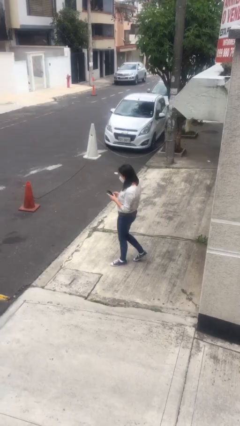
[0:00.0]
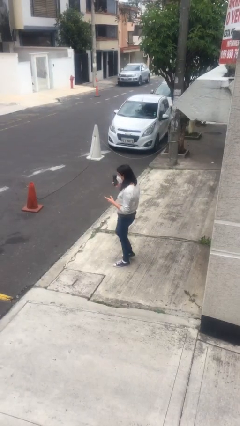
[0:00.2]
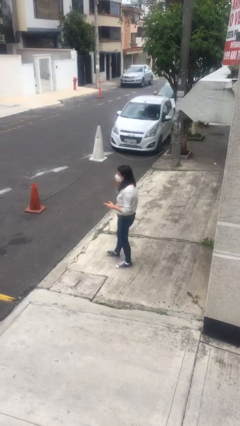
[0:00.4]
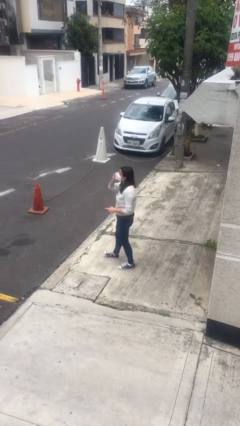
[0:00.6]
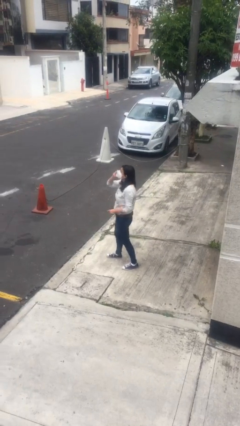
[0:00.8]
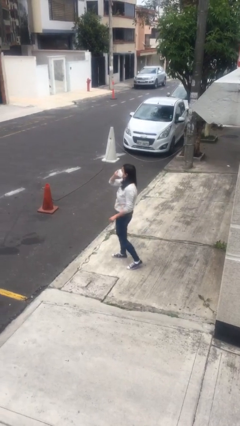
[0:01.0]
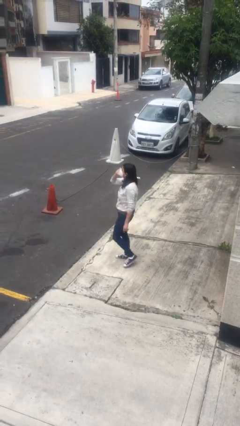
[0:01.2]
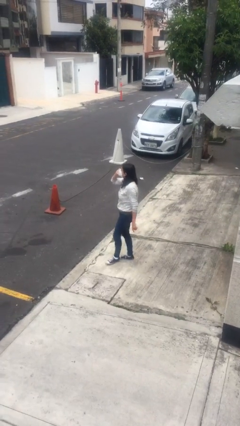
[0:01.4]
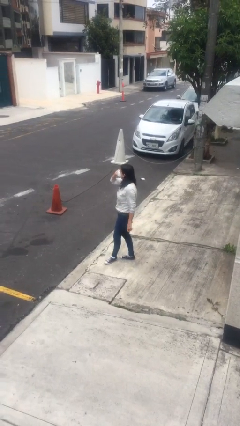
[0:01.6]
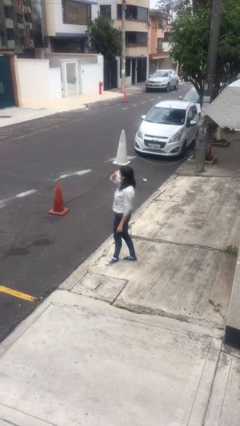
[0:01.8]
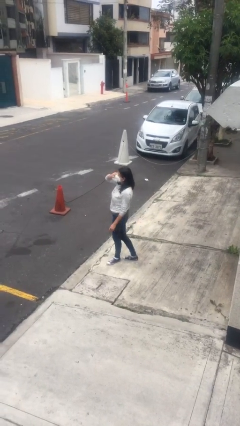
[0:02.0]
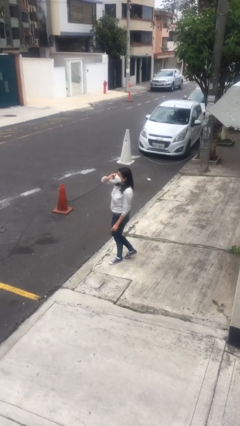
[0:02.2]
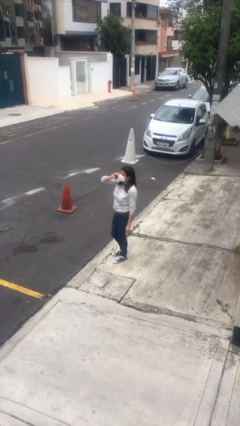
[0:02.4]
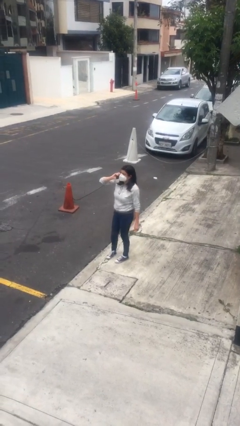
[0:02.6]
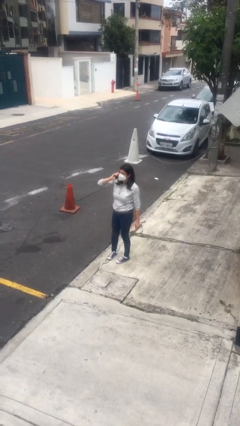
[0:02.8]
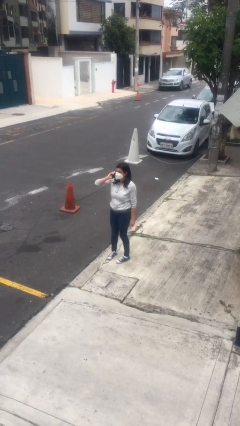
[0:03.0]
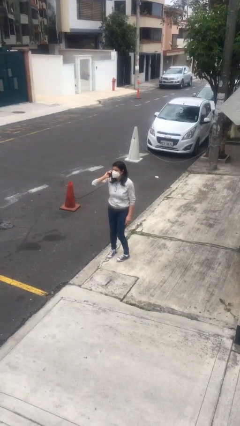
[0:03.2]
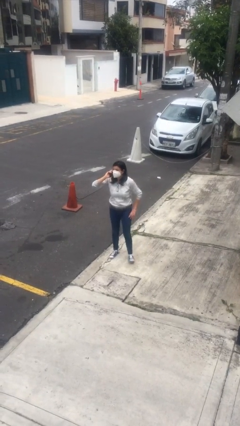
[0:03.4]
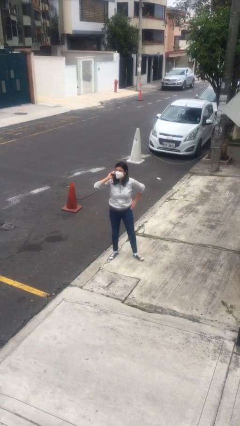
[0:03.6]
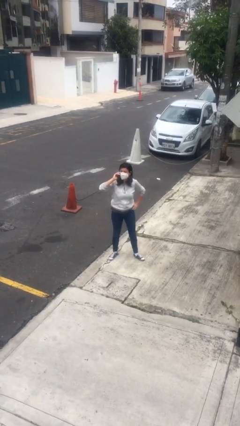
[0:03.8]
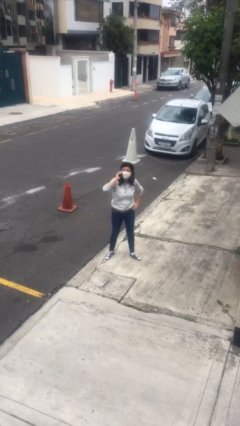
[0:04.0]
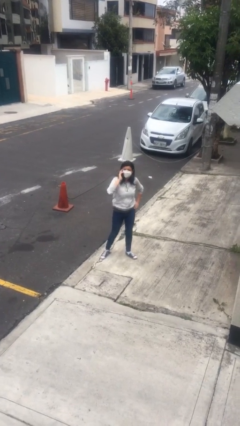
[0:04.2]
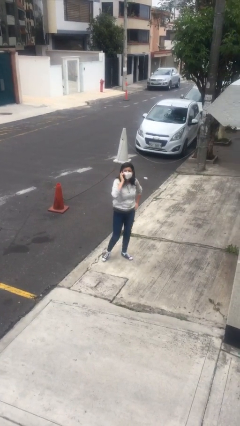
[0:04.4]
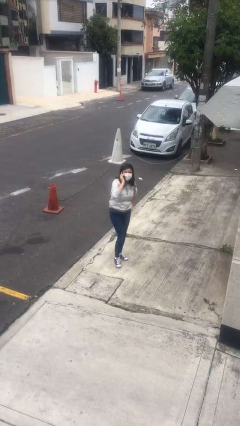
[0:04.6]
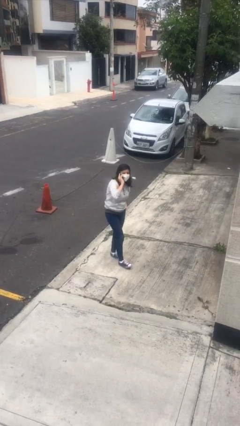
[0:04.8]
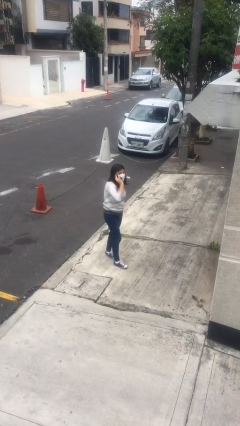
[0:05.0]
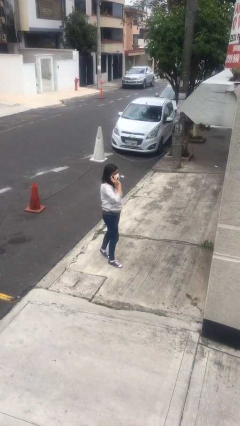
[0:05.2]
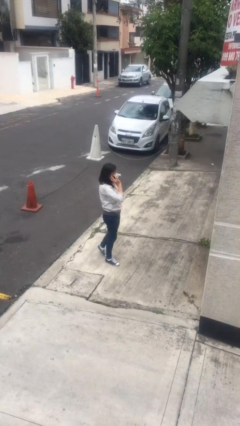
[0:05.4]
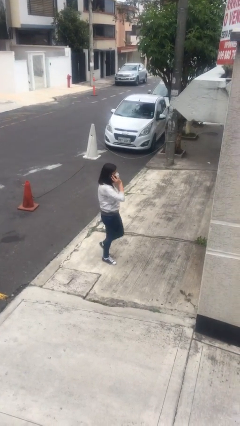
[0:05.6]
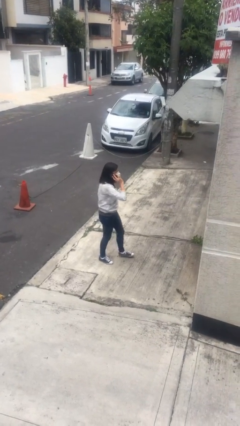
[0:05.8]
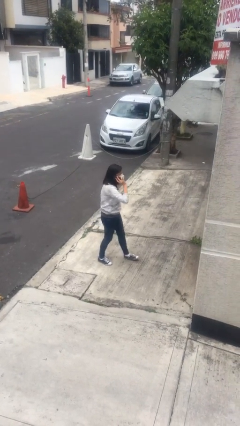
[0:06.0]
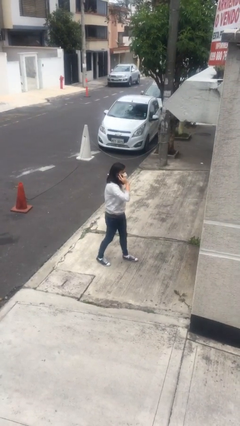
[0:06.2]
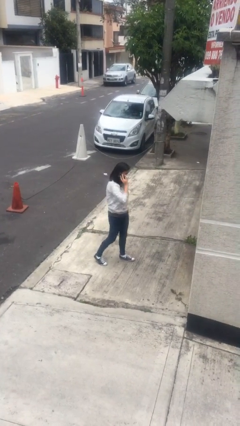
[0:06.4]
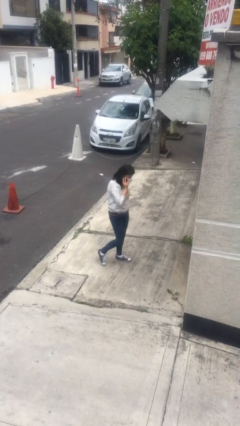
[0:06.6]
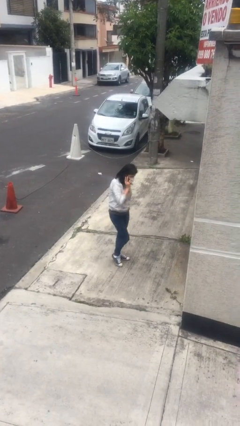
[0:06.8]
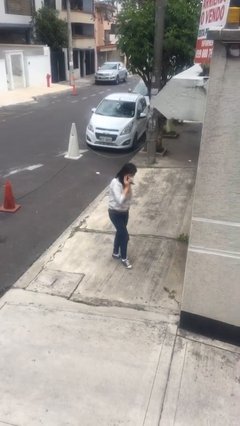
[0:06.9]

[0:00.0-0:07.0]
person talks on phone

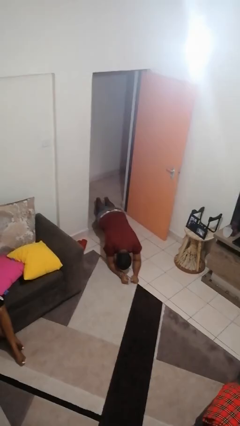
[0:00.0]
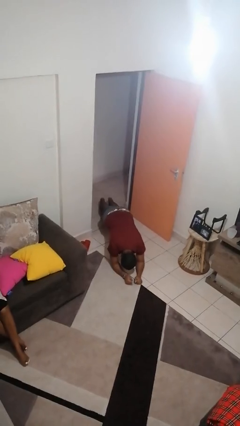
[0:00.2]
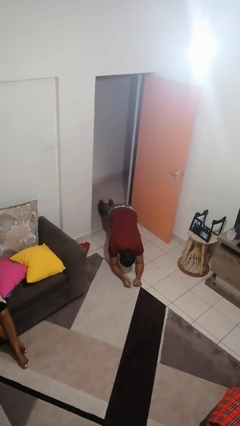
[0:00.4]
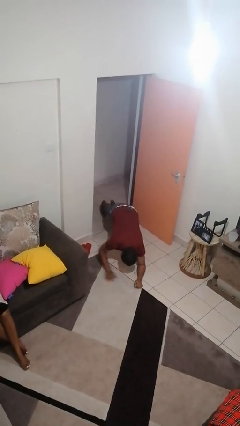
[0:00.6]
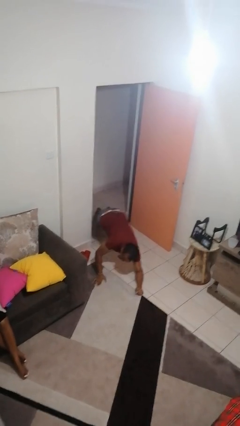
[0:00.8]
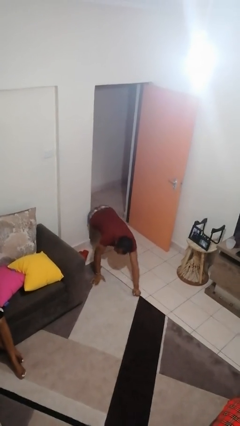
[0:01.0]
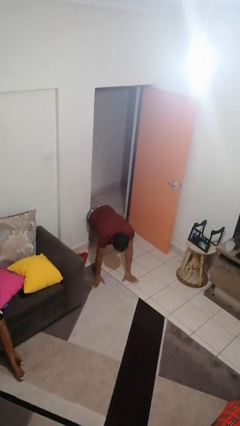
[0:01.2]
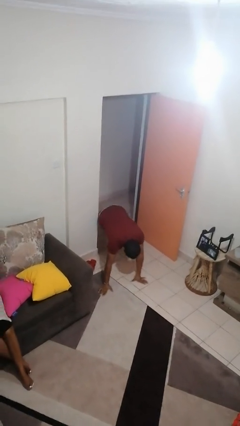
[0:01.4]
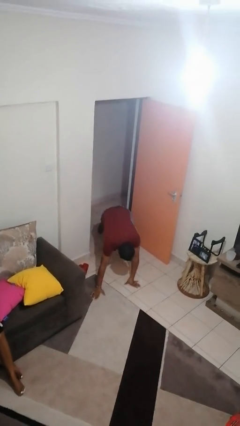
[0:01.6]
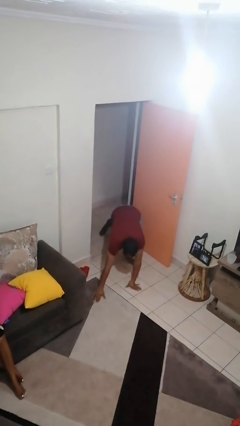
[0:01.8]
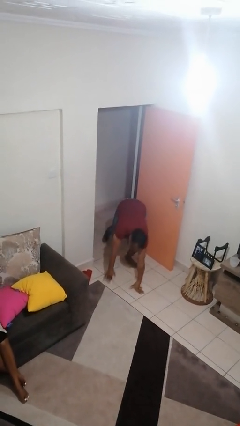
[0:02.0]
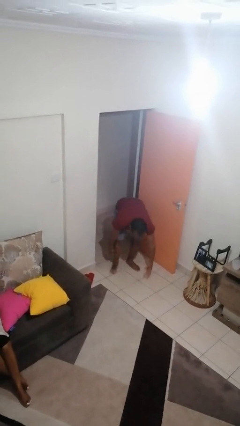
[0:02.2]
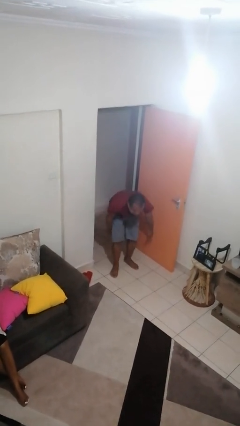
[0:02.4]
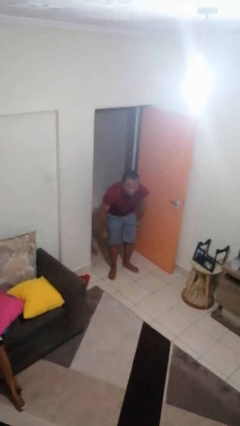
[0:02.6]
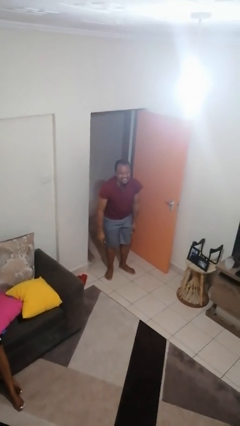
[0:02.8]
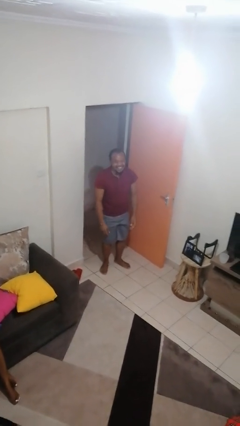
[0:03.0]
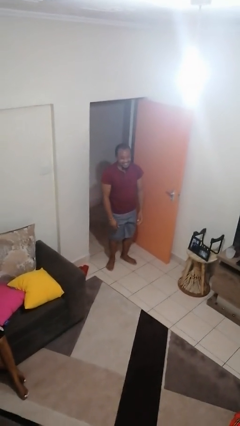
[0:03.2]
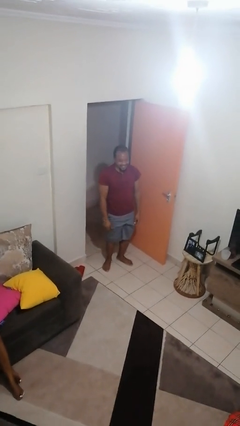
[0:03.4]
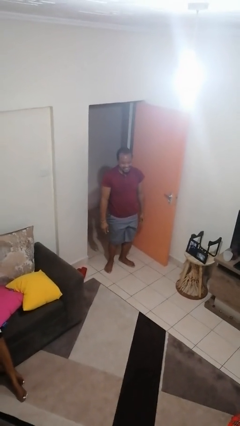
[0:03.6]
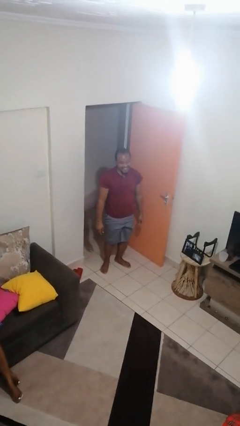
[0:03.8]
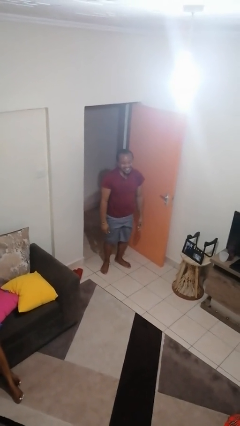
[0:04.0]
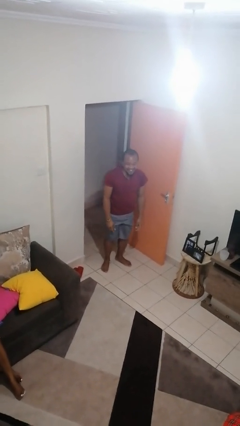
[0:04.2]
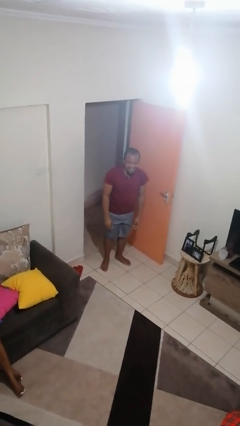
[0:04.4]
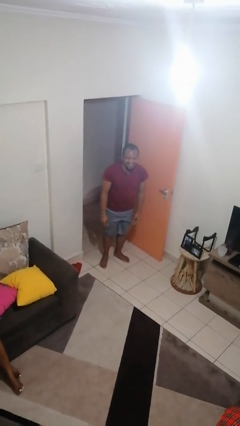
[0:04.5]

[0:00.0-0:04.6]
person stands up from floor

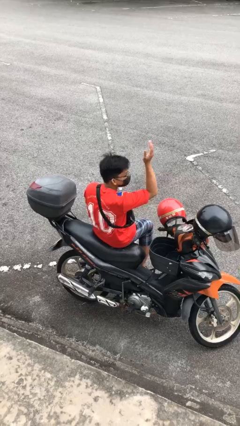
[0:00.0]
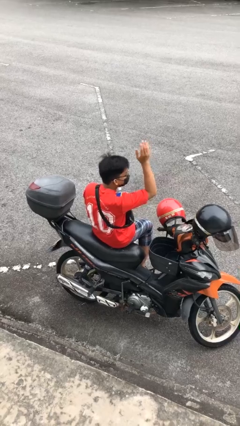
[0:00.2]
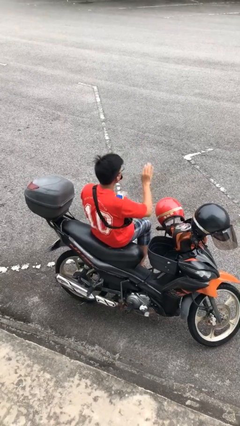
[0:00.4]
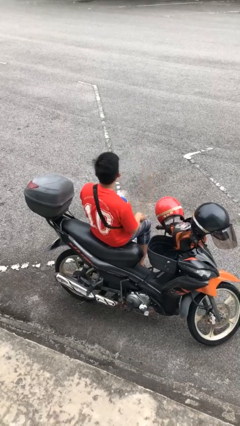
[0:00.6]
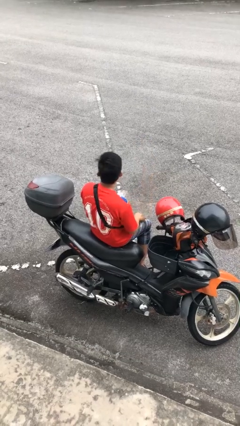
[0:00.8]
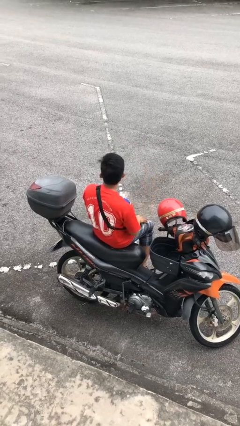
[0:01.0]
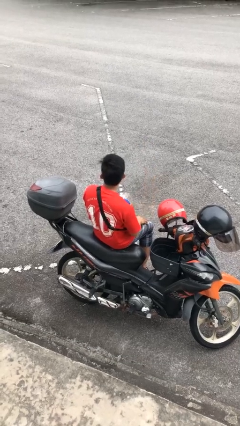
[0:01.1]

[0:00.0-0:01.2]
person gestures swipe down

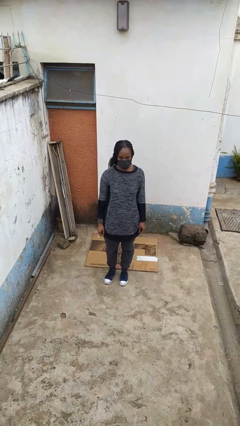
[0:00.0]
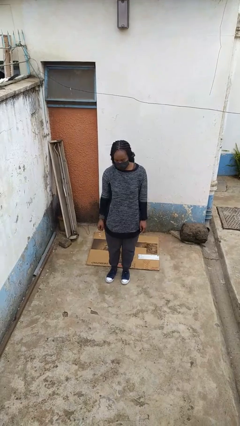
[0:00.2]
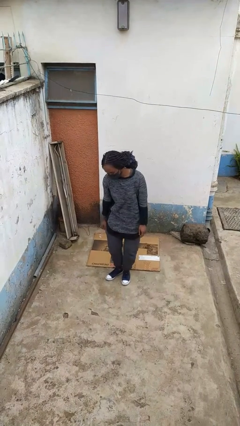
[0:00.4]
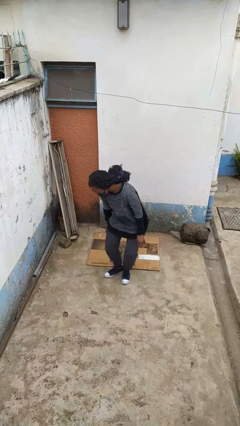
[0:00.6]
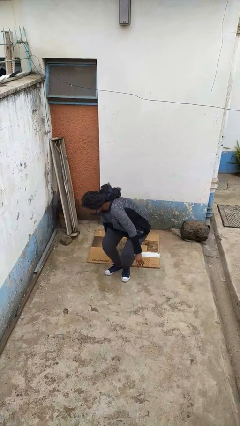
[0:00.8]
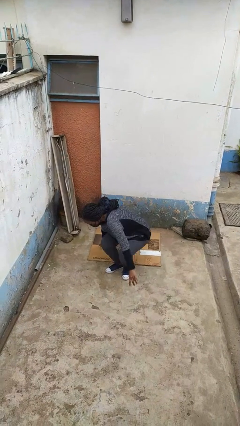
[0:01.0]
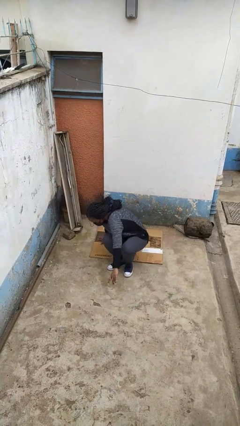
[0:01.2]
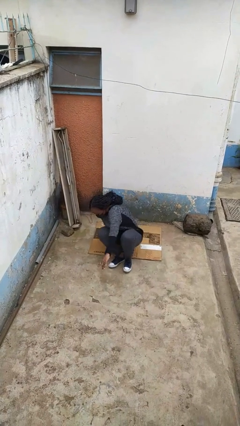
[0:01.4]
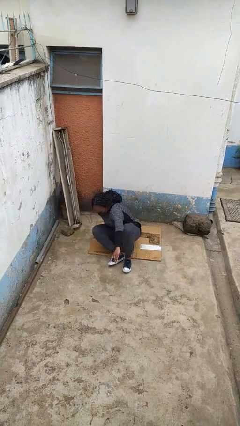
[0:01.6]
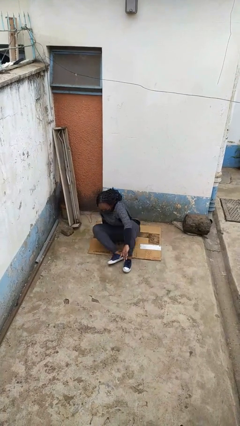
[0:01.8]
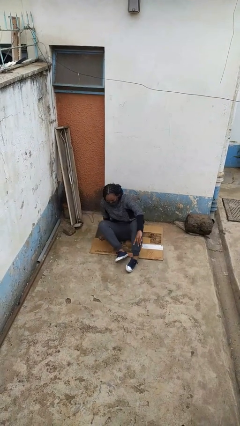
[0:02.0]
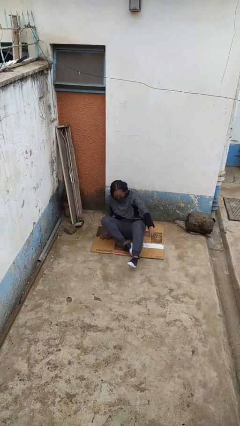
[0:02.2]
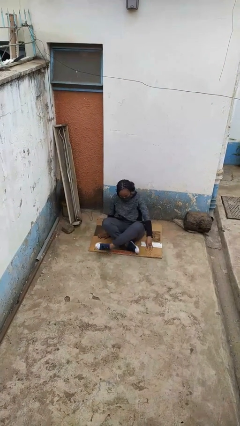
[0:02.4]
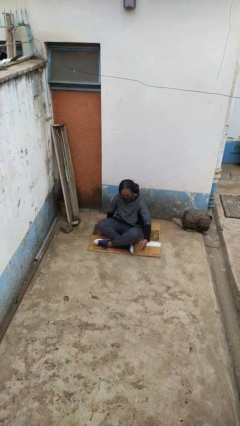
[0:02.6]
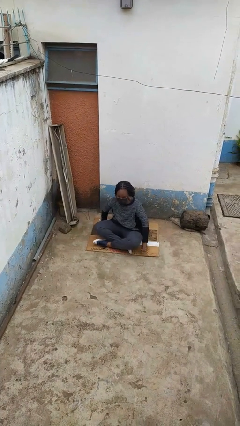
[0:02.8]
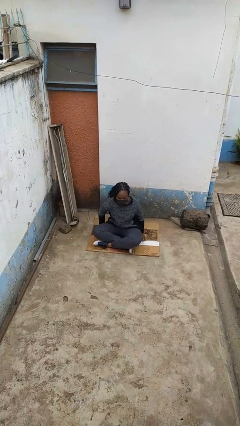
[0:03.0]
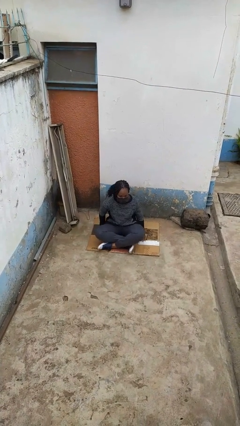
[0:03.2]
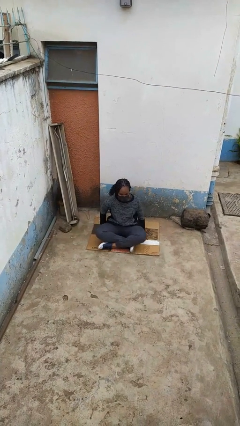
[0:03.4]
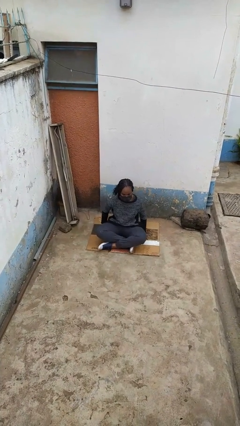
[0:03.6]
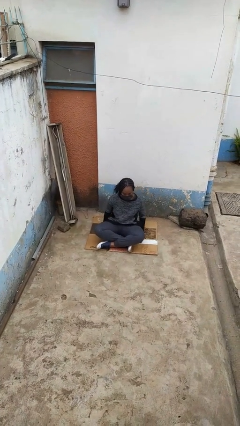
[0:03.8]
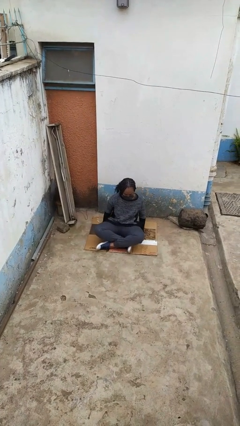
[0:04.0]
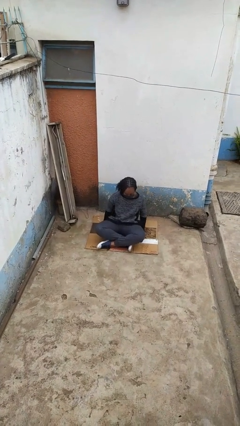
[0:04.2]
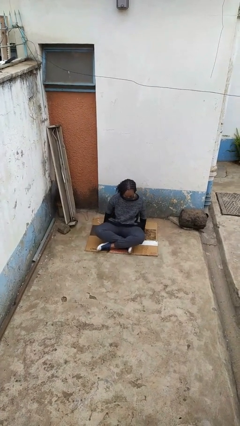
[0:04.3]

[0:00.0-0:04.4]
person sits crisscross

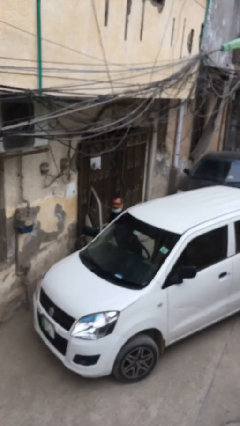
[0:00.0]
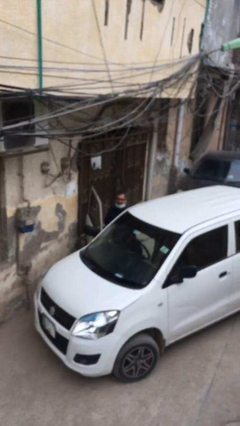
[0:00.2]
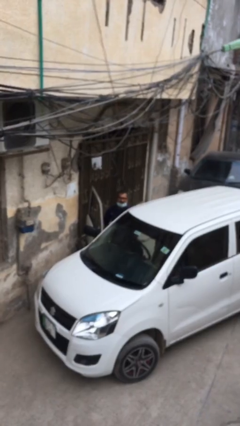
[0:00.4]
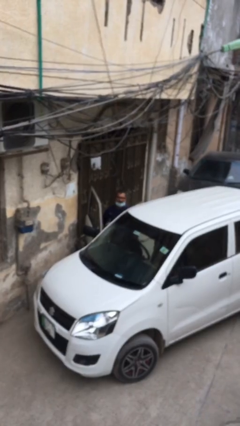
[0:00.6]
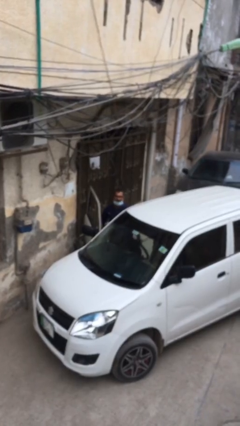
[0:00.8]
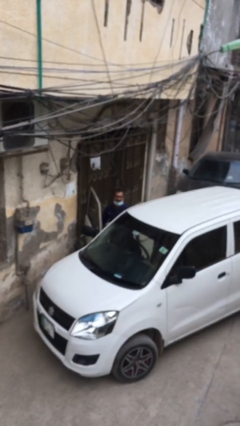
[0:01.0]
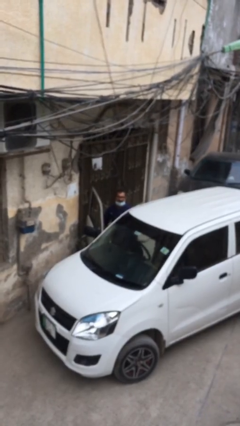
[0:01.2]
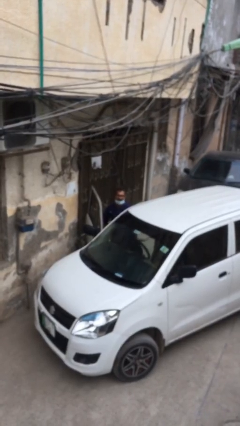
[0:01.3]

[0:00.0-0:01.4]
person exits car
